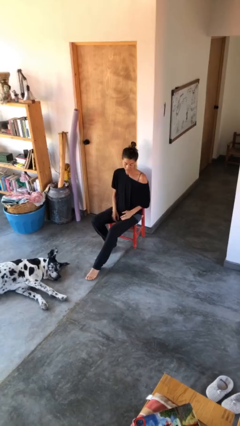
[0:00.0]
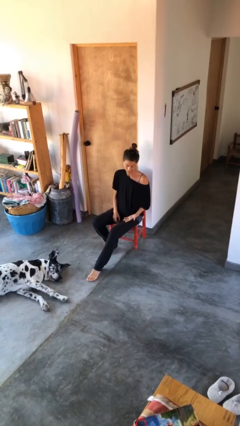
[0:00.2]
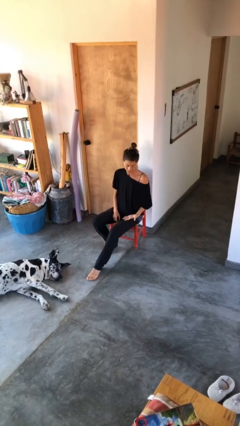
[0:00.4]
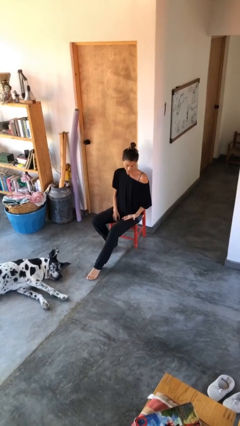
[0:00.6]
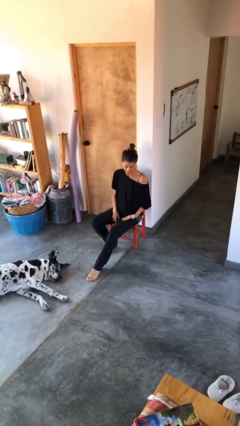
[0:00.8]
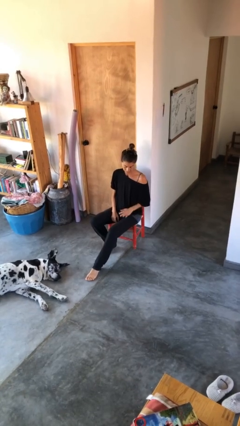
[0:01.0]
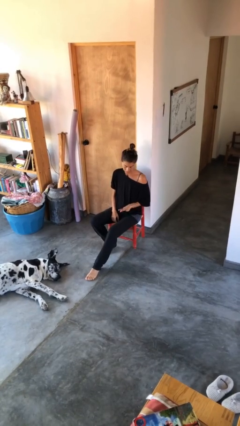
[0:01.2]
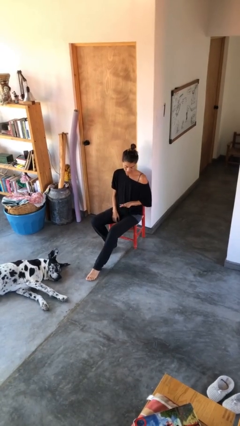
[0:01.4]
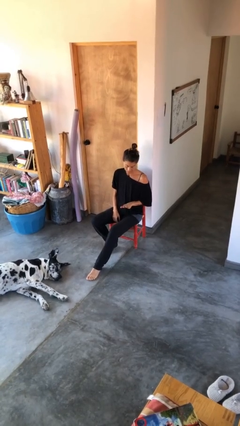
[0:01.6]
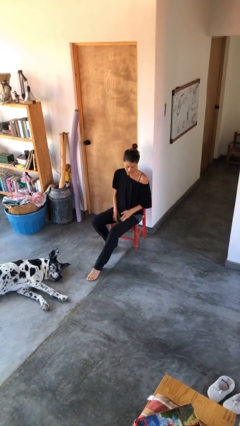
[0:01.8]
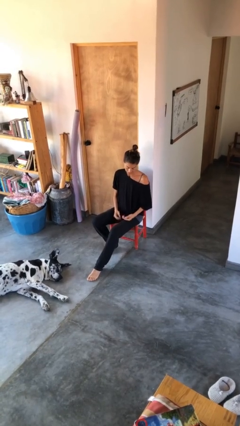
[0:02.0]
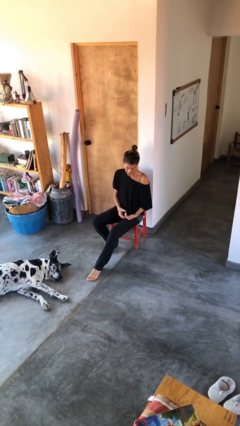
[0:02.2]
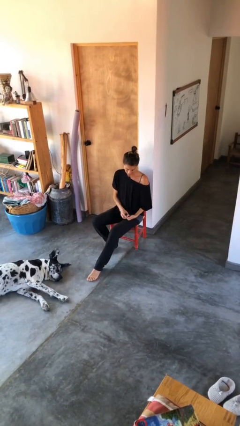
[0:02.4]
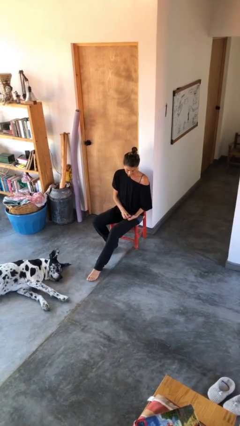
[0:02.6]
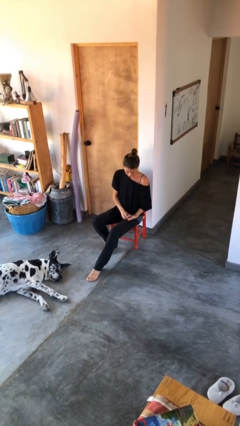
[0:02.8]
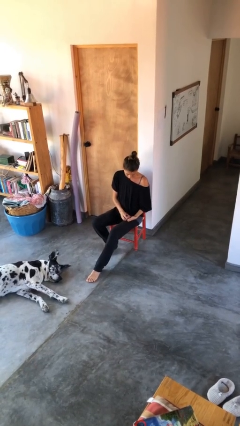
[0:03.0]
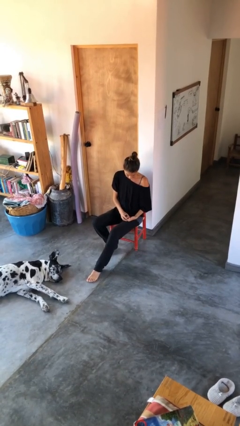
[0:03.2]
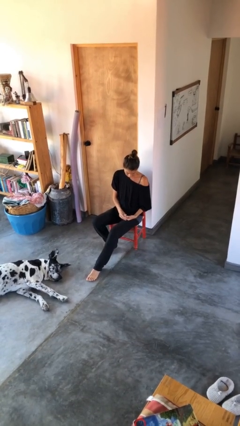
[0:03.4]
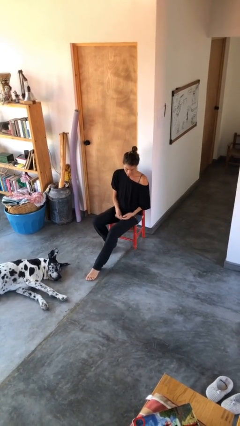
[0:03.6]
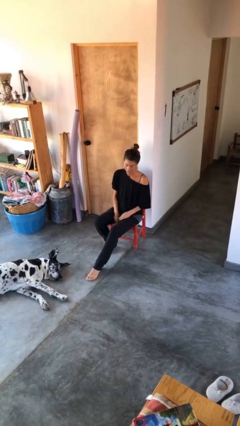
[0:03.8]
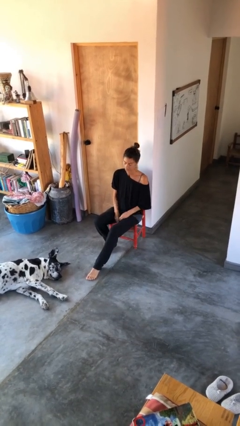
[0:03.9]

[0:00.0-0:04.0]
person looks at hands in lap

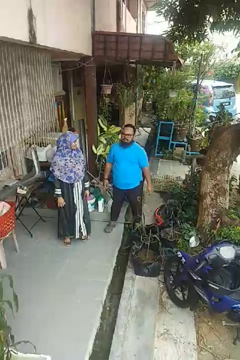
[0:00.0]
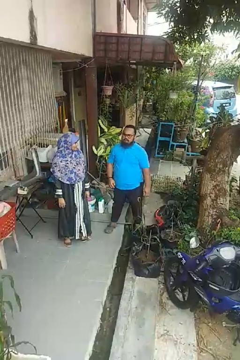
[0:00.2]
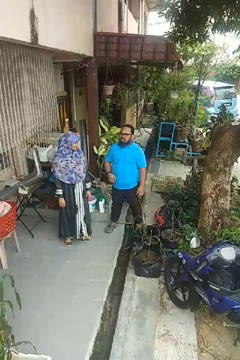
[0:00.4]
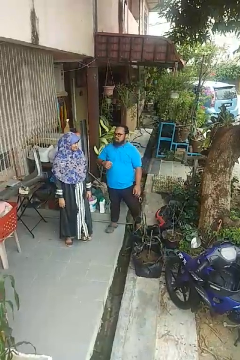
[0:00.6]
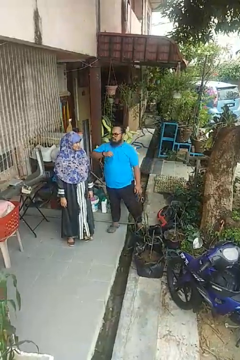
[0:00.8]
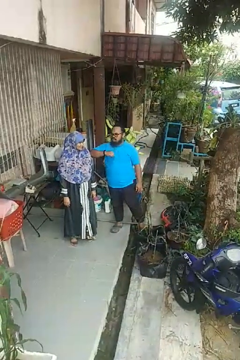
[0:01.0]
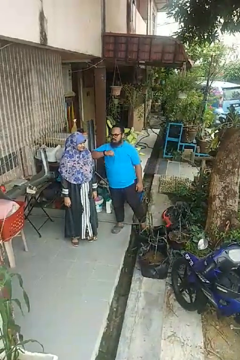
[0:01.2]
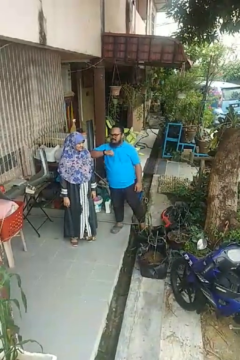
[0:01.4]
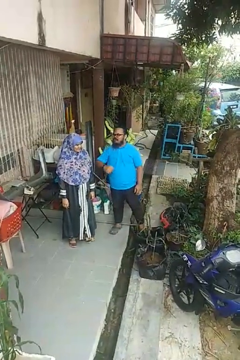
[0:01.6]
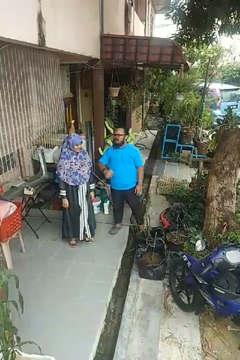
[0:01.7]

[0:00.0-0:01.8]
person nudges person with elbow

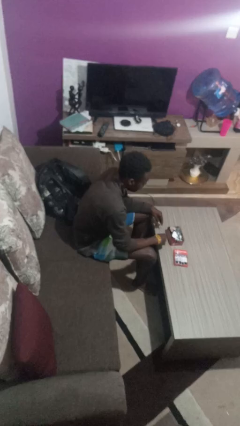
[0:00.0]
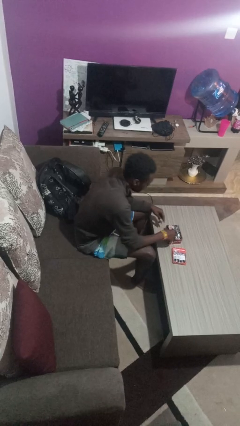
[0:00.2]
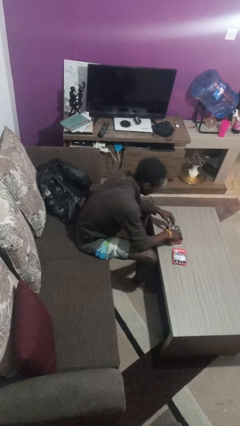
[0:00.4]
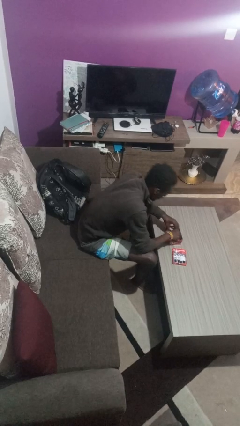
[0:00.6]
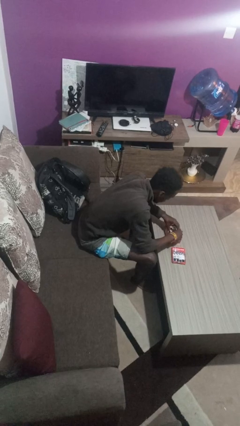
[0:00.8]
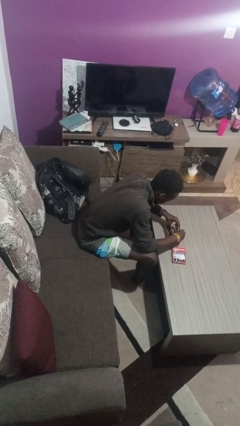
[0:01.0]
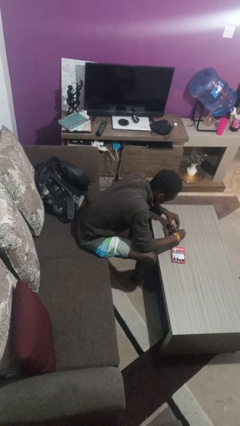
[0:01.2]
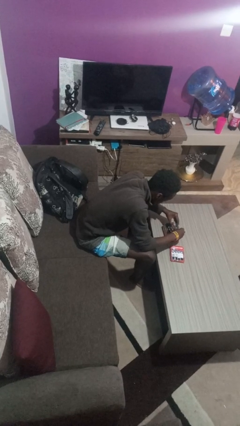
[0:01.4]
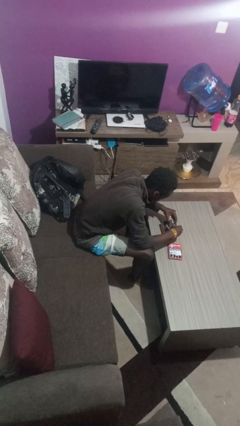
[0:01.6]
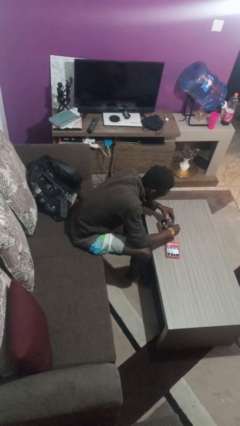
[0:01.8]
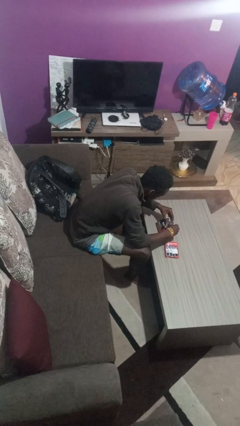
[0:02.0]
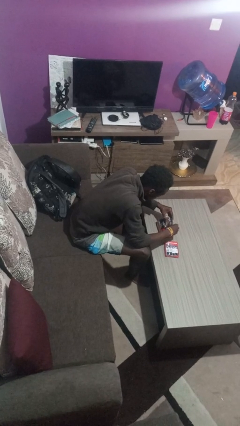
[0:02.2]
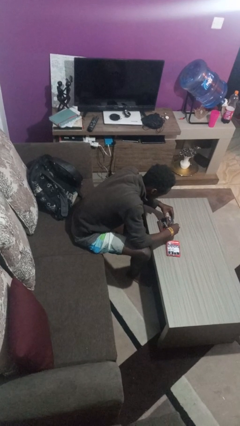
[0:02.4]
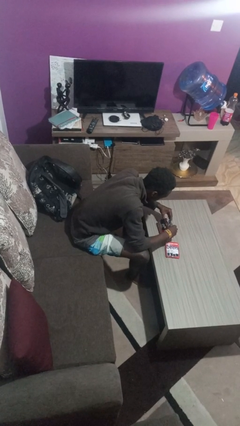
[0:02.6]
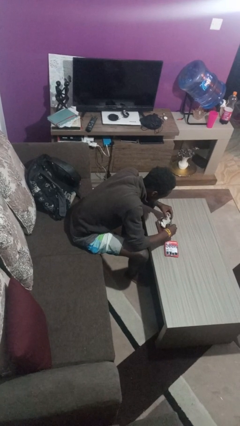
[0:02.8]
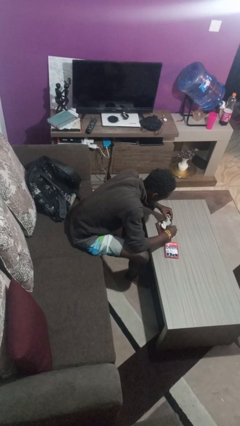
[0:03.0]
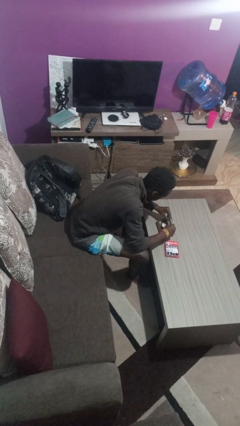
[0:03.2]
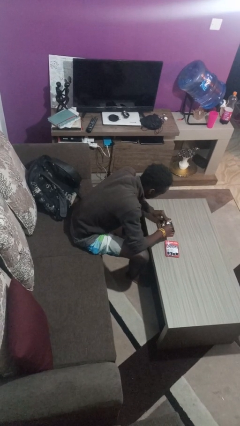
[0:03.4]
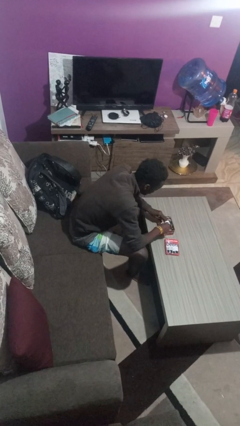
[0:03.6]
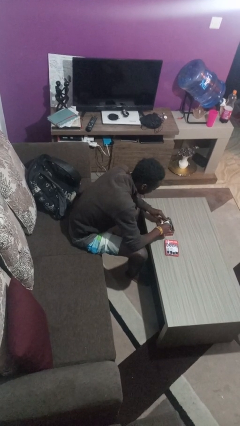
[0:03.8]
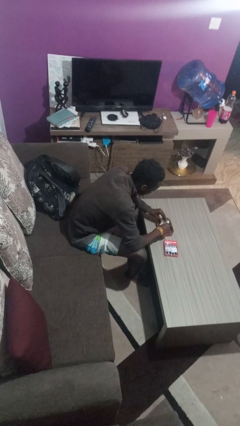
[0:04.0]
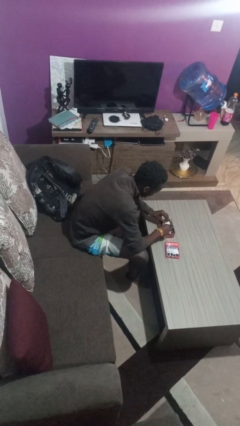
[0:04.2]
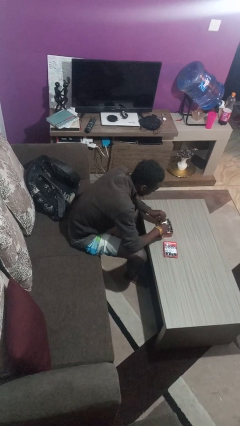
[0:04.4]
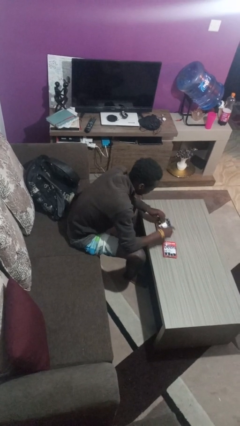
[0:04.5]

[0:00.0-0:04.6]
person searches jewelry box

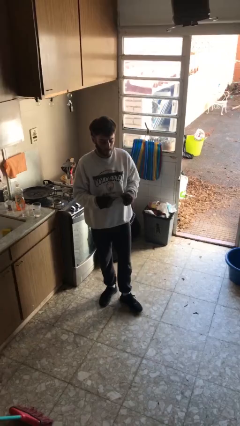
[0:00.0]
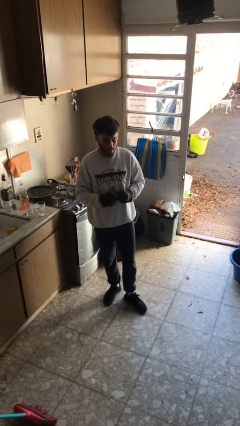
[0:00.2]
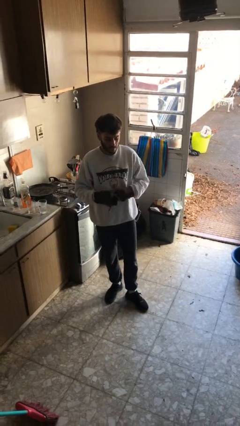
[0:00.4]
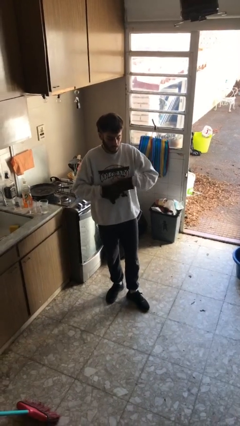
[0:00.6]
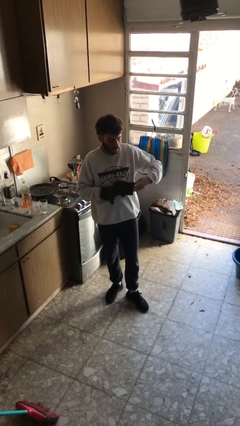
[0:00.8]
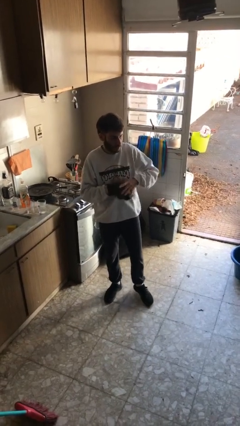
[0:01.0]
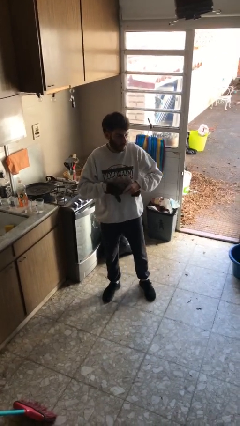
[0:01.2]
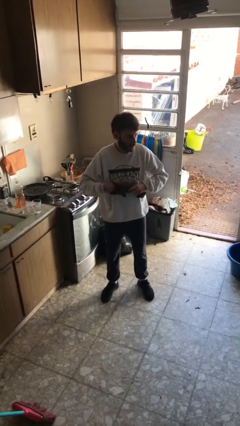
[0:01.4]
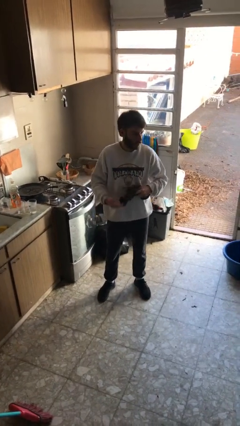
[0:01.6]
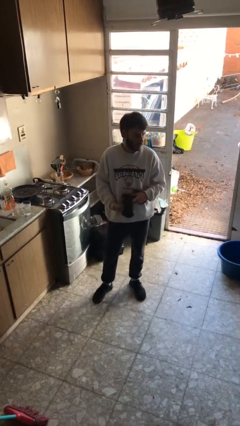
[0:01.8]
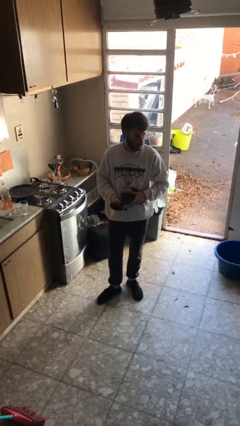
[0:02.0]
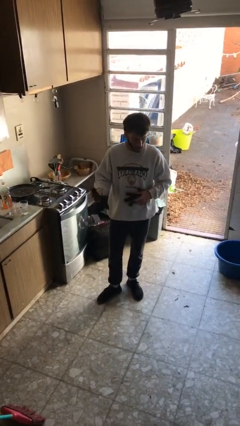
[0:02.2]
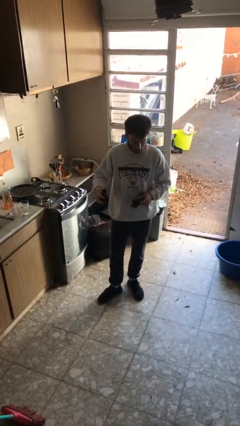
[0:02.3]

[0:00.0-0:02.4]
person takes off gloves

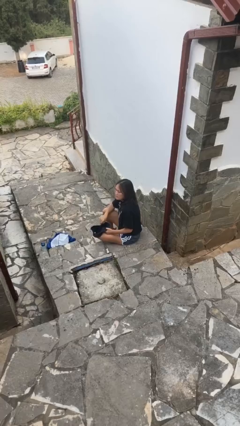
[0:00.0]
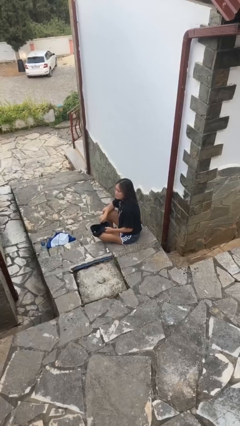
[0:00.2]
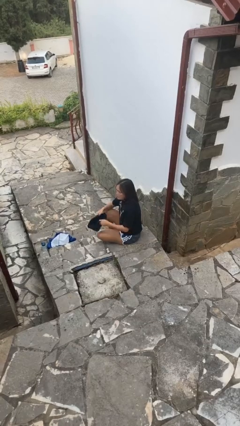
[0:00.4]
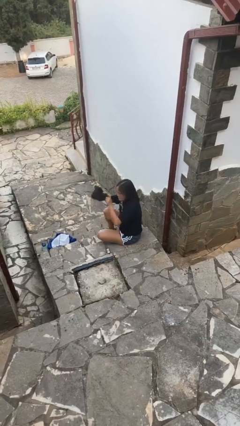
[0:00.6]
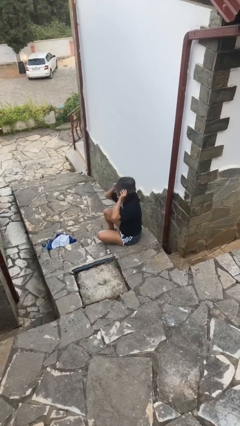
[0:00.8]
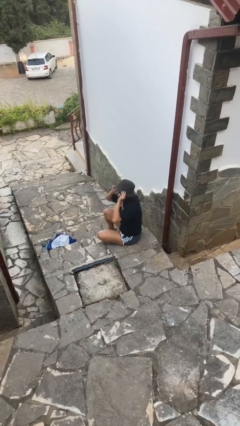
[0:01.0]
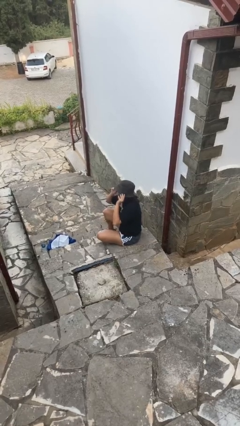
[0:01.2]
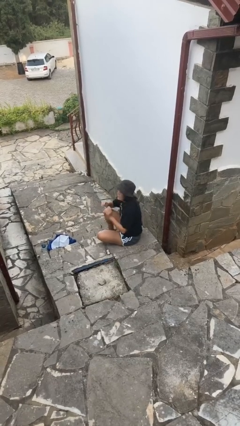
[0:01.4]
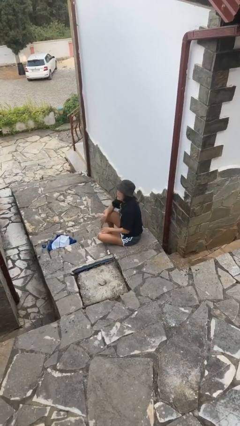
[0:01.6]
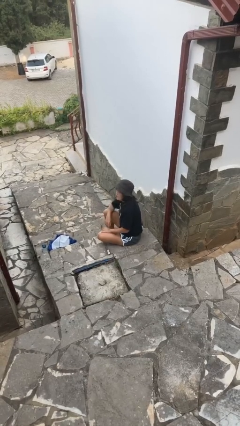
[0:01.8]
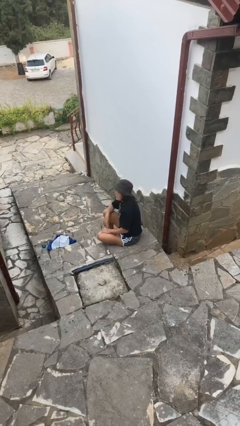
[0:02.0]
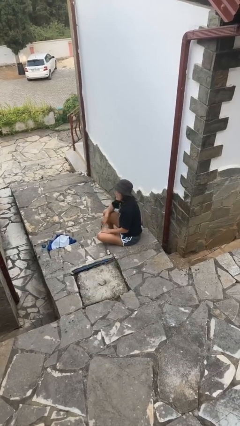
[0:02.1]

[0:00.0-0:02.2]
person puts on hat

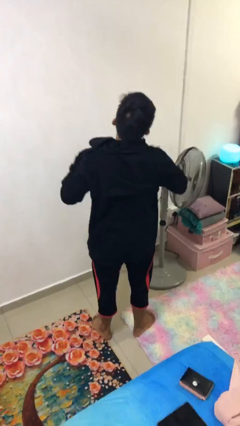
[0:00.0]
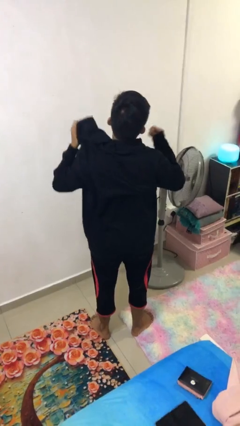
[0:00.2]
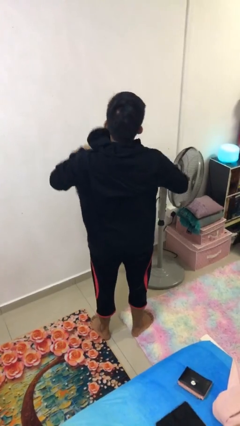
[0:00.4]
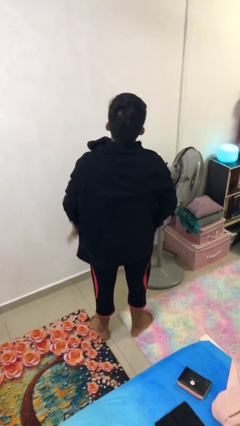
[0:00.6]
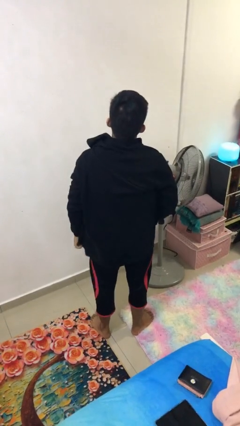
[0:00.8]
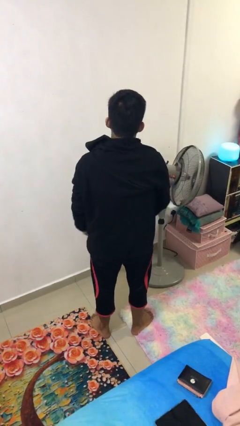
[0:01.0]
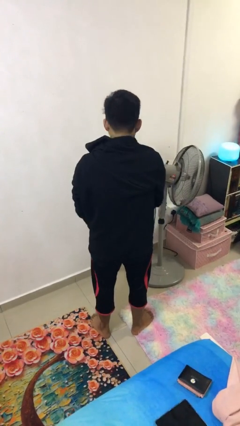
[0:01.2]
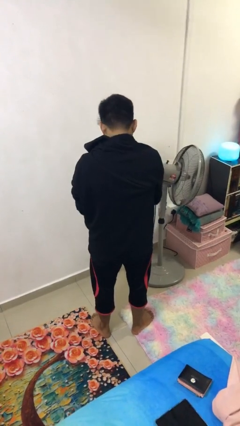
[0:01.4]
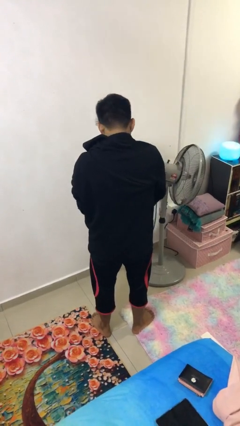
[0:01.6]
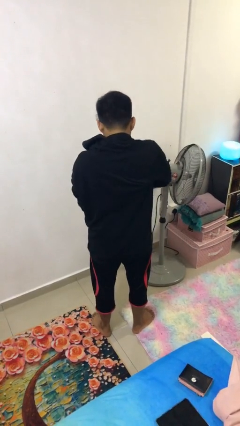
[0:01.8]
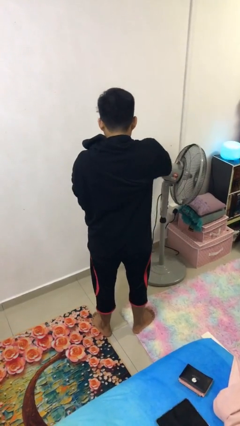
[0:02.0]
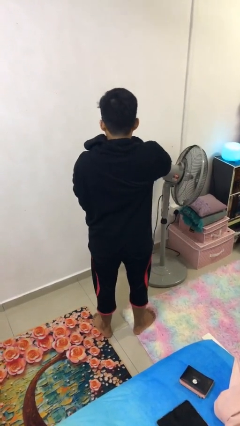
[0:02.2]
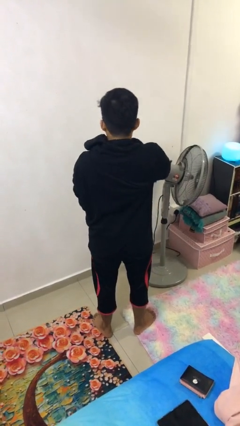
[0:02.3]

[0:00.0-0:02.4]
person zips up jacket

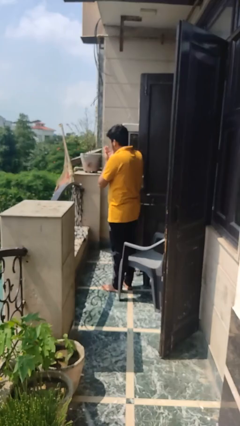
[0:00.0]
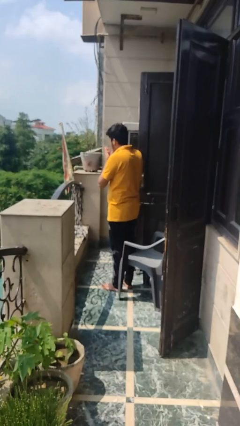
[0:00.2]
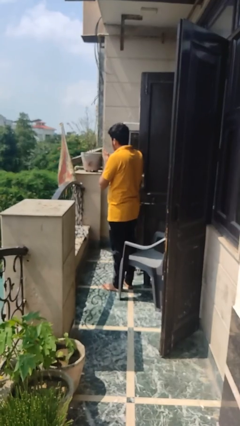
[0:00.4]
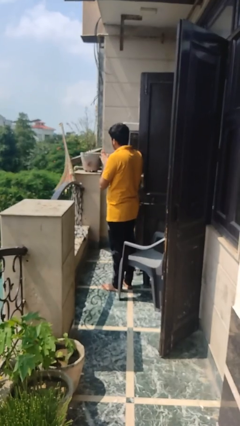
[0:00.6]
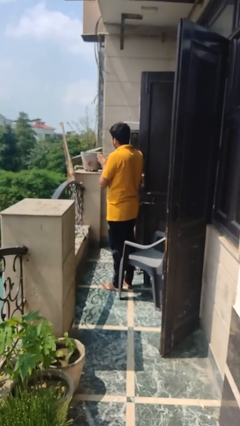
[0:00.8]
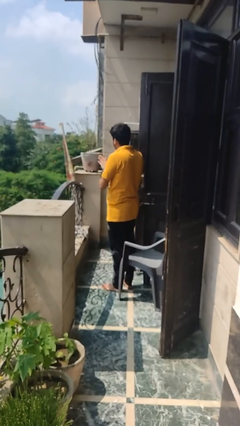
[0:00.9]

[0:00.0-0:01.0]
person blows into hands
